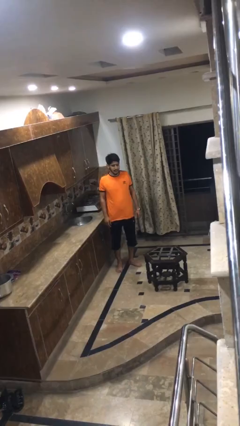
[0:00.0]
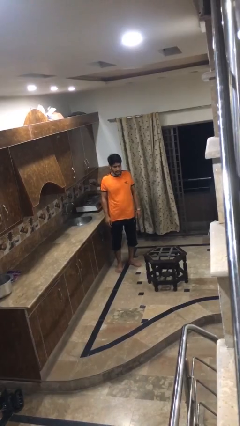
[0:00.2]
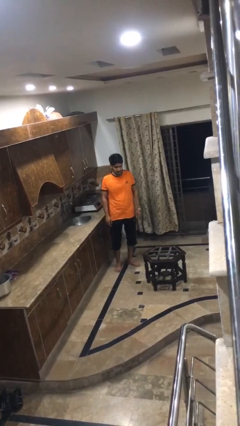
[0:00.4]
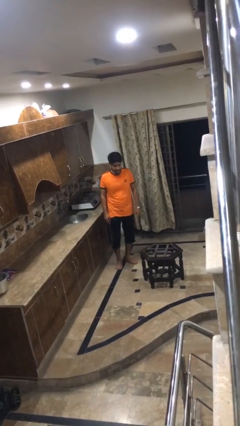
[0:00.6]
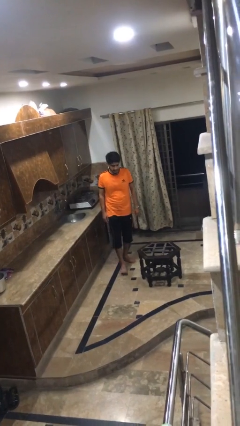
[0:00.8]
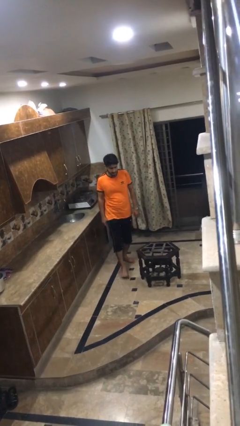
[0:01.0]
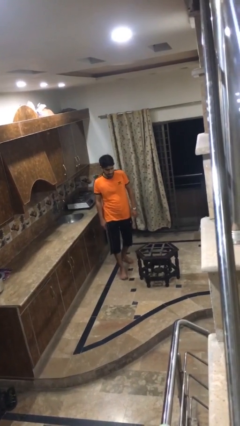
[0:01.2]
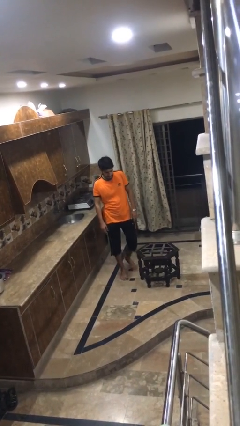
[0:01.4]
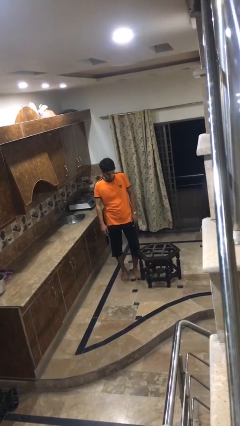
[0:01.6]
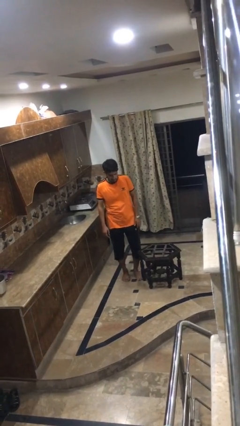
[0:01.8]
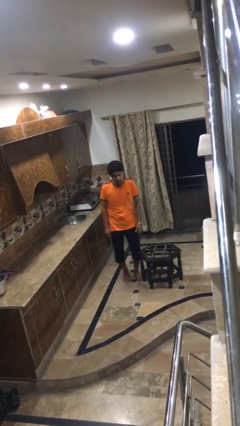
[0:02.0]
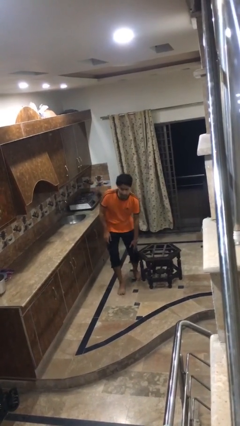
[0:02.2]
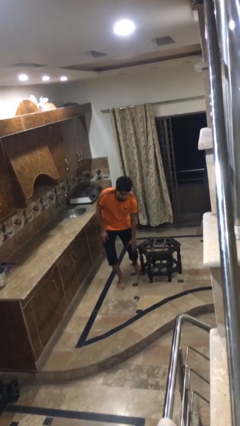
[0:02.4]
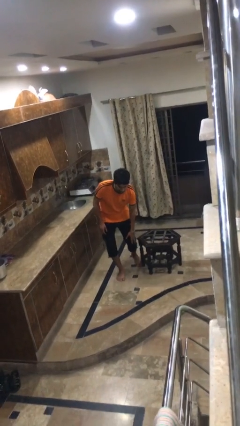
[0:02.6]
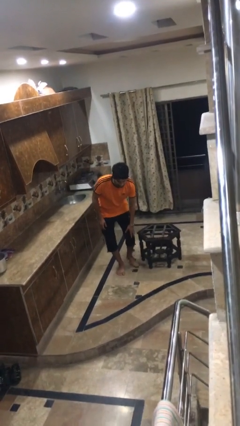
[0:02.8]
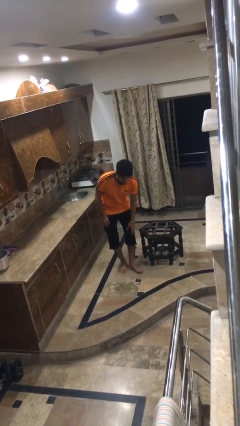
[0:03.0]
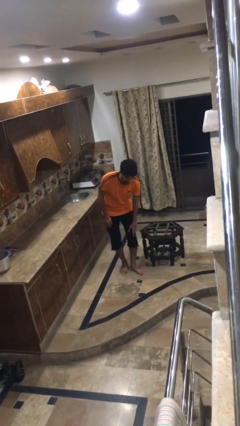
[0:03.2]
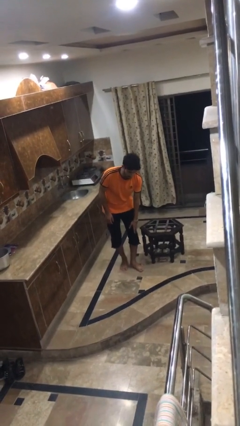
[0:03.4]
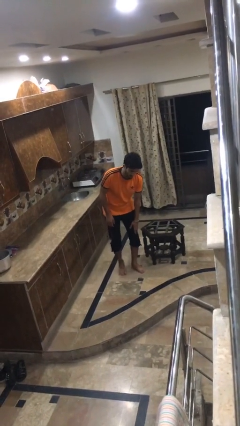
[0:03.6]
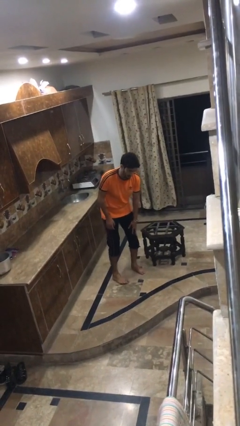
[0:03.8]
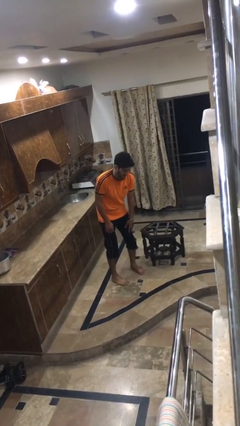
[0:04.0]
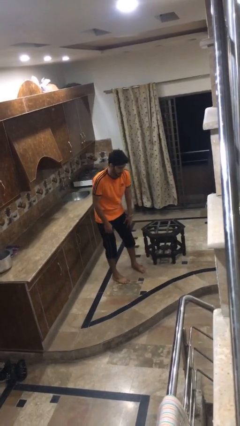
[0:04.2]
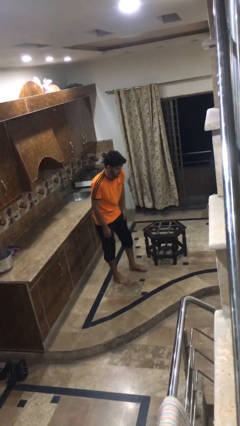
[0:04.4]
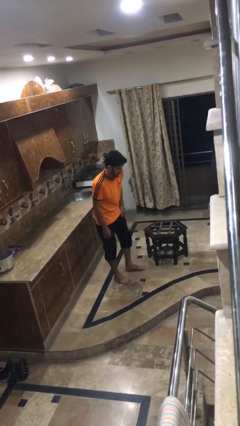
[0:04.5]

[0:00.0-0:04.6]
person bumps into table

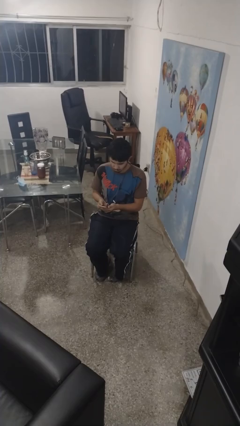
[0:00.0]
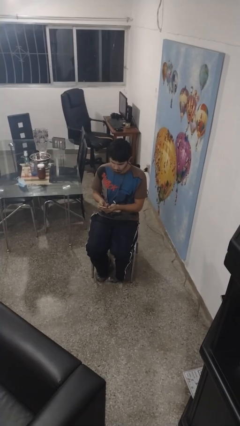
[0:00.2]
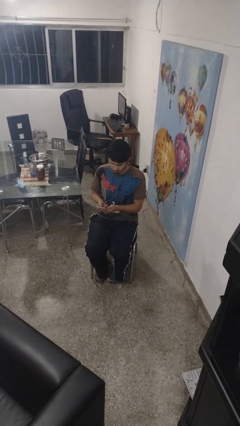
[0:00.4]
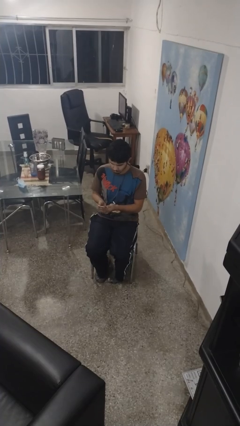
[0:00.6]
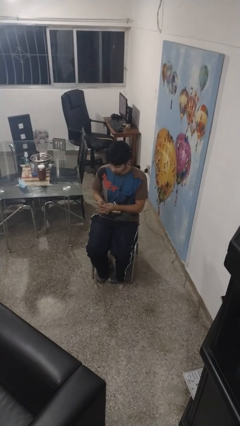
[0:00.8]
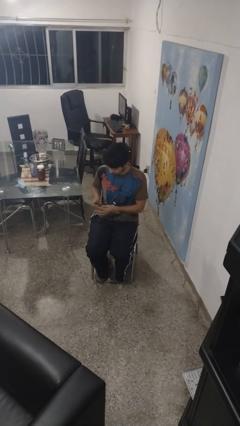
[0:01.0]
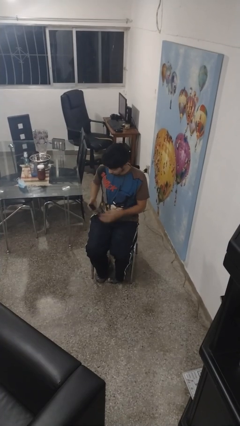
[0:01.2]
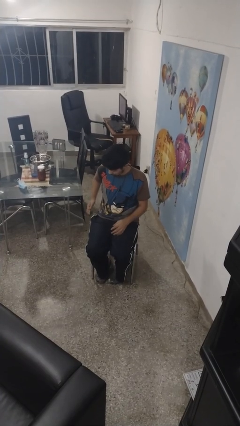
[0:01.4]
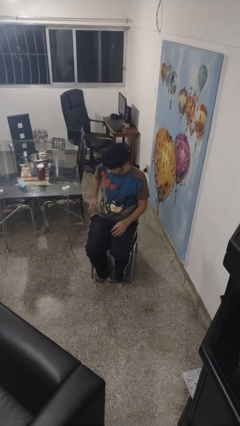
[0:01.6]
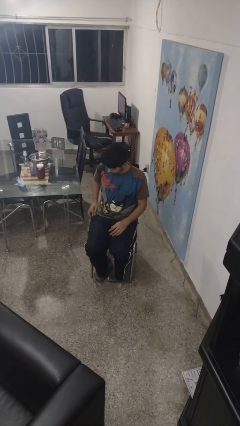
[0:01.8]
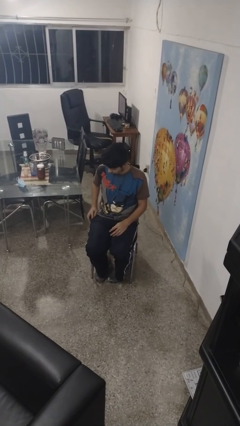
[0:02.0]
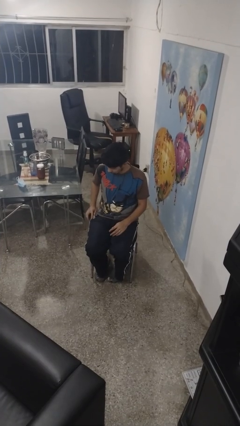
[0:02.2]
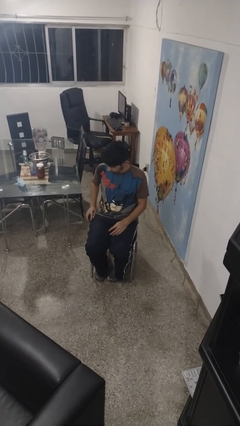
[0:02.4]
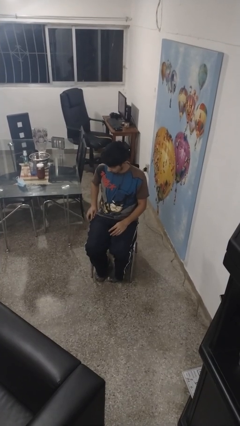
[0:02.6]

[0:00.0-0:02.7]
person puts phone into pocket

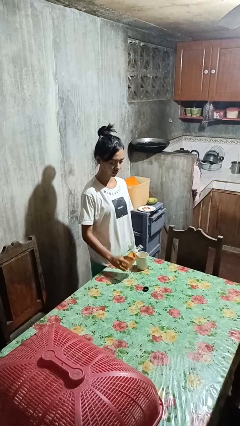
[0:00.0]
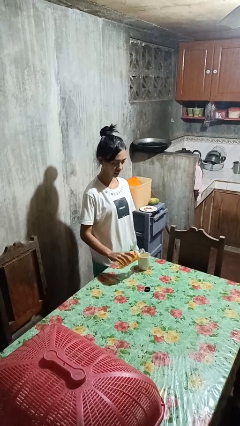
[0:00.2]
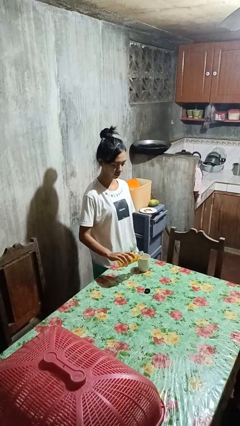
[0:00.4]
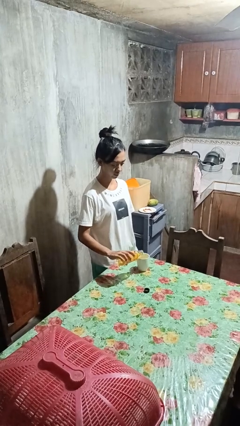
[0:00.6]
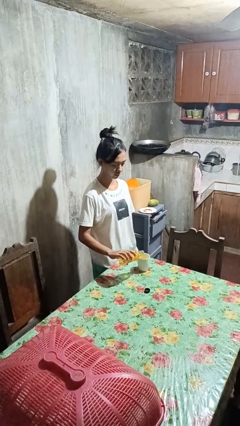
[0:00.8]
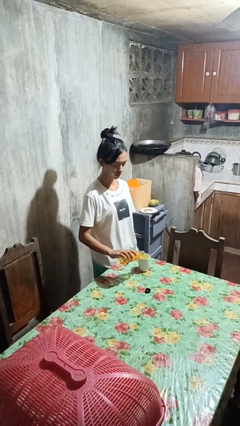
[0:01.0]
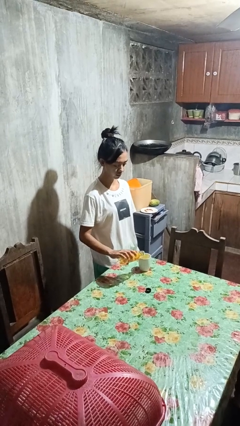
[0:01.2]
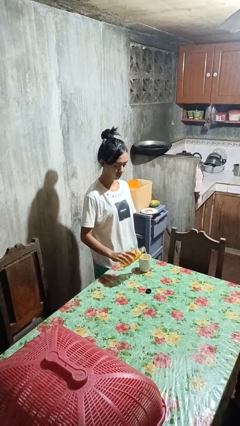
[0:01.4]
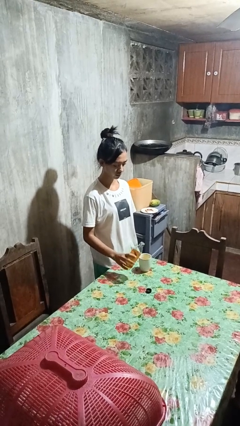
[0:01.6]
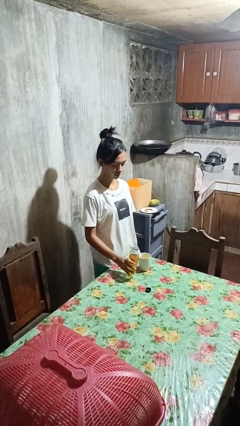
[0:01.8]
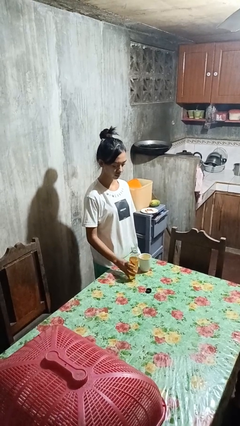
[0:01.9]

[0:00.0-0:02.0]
person pours liquid into cup

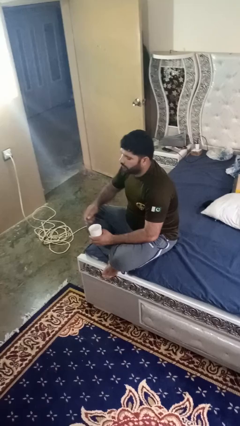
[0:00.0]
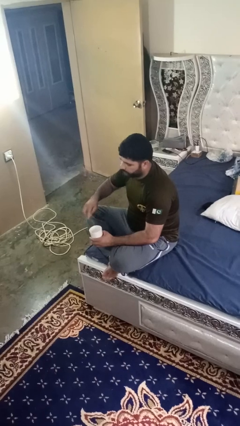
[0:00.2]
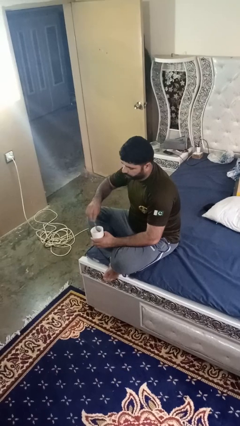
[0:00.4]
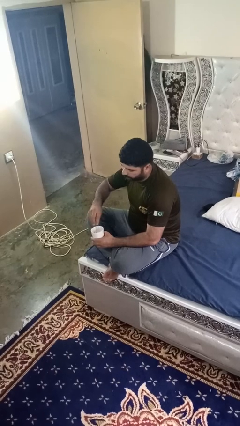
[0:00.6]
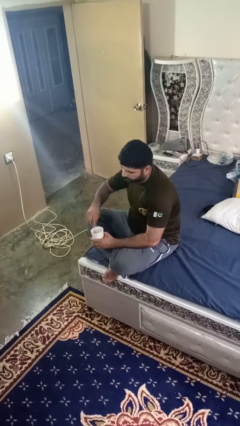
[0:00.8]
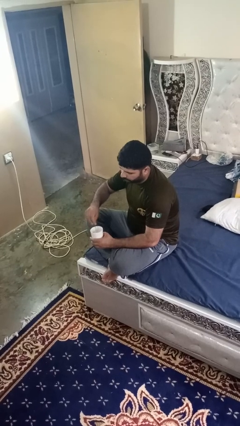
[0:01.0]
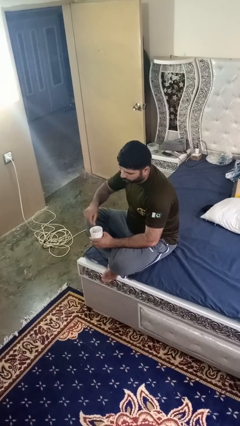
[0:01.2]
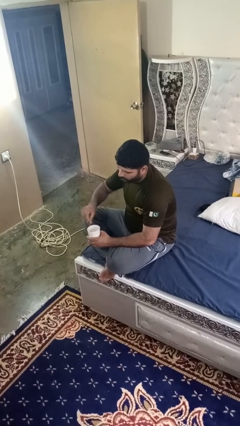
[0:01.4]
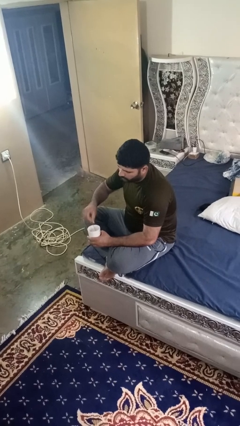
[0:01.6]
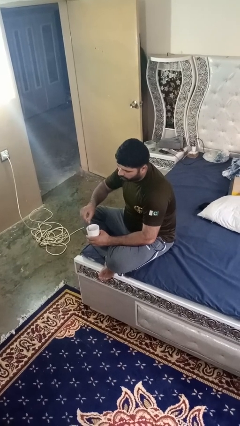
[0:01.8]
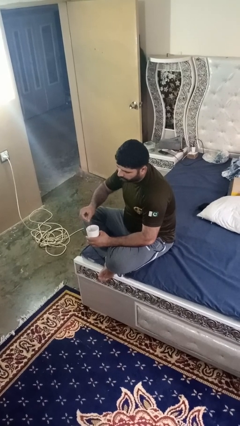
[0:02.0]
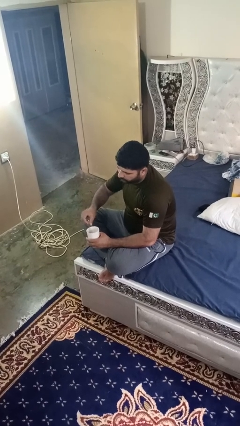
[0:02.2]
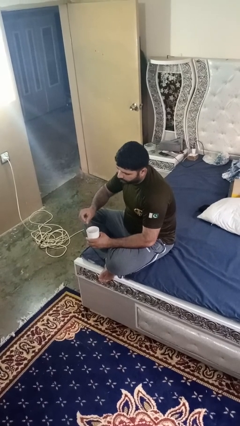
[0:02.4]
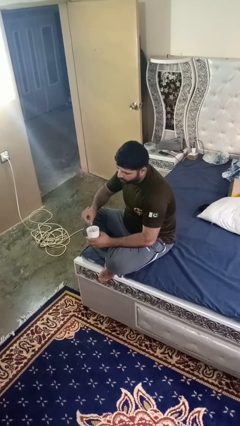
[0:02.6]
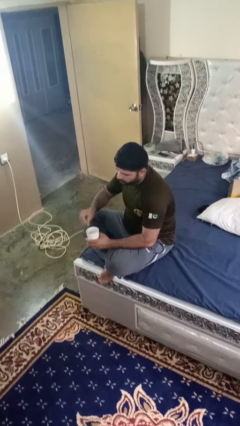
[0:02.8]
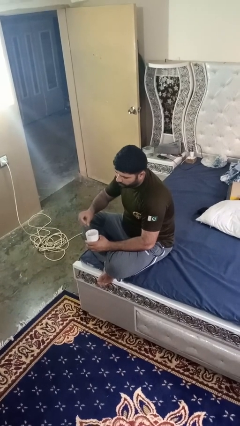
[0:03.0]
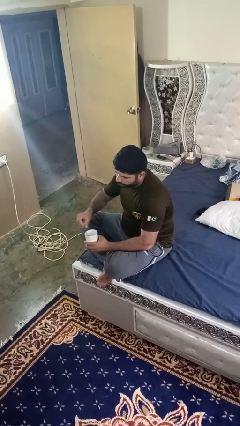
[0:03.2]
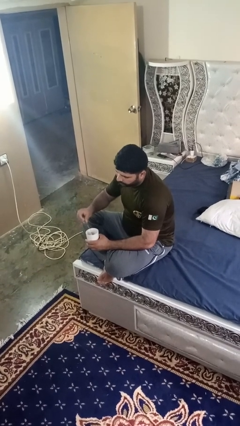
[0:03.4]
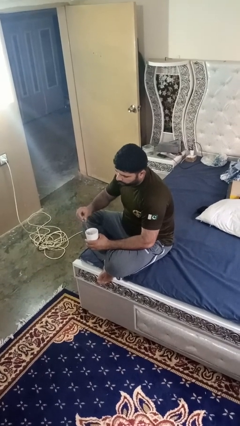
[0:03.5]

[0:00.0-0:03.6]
person stirs mug

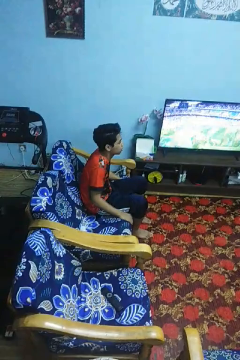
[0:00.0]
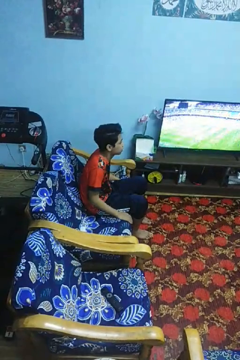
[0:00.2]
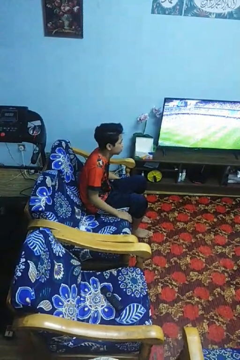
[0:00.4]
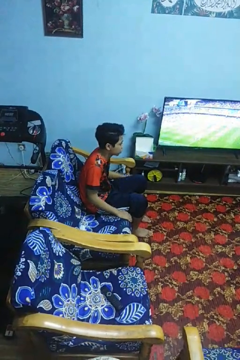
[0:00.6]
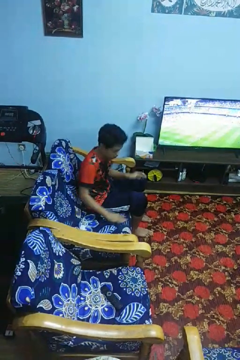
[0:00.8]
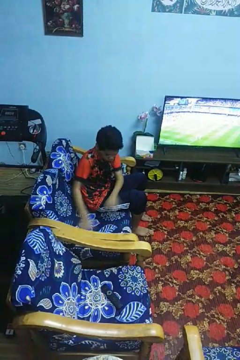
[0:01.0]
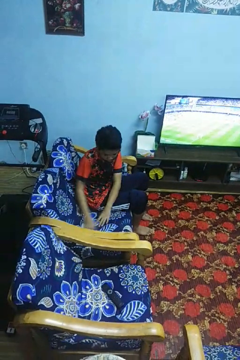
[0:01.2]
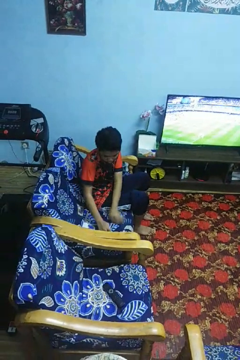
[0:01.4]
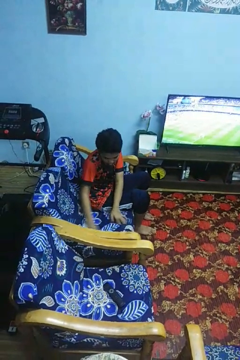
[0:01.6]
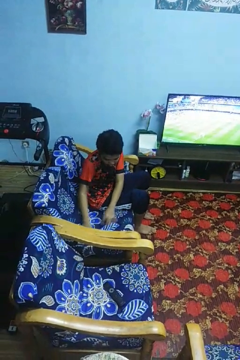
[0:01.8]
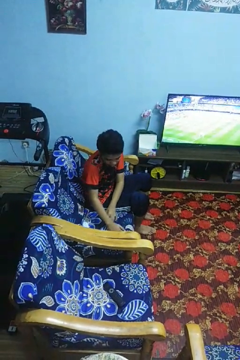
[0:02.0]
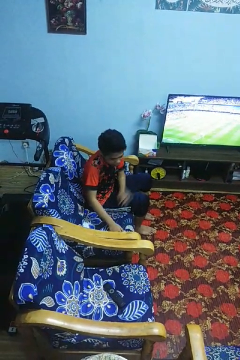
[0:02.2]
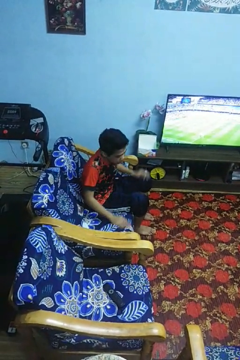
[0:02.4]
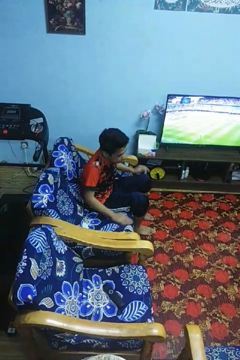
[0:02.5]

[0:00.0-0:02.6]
person searches in couch

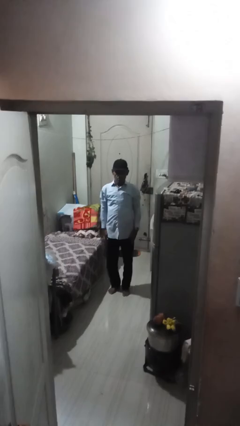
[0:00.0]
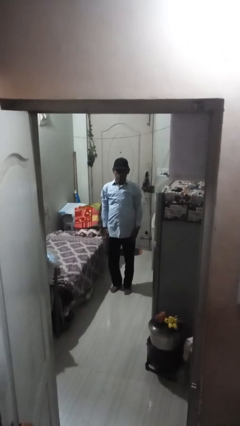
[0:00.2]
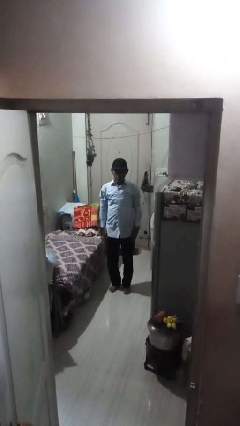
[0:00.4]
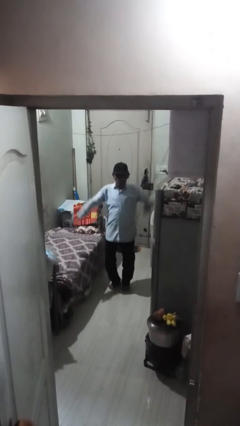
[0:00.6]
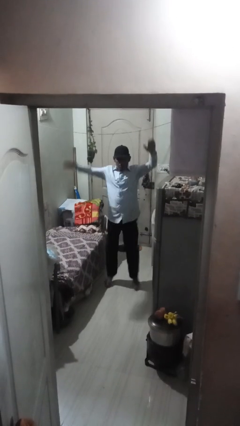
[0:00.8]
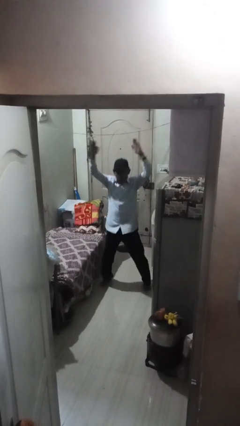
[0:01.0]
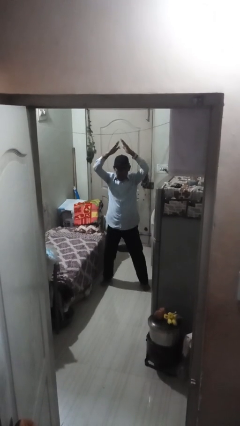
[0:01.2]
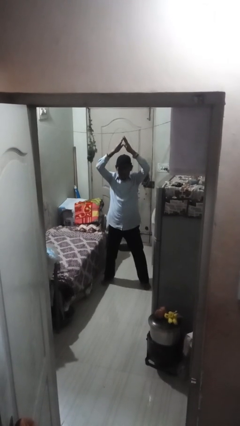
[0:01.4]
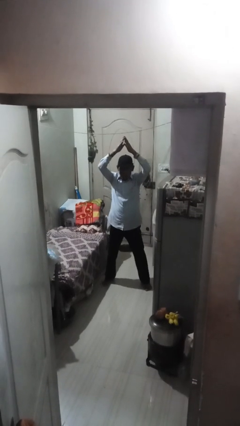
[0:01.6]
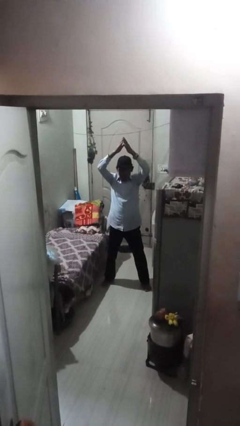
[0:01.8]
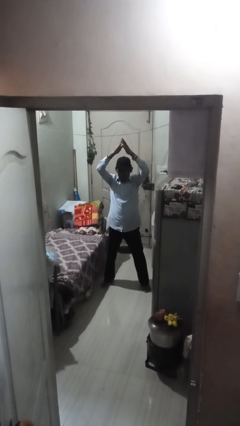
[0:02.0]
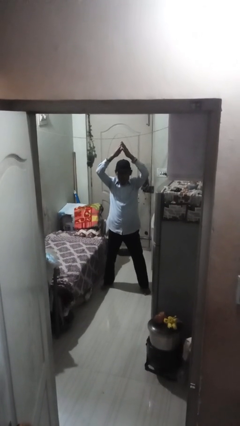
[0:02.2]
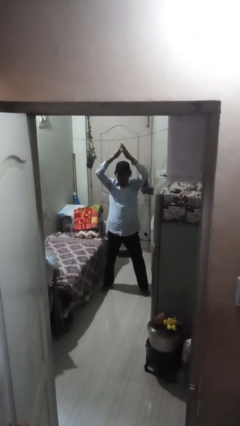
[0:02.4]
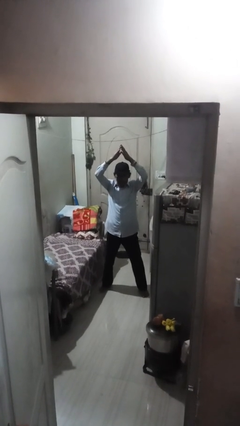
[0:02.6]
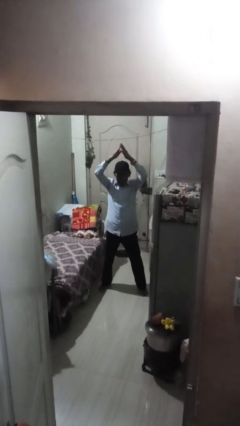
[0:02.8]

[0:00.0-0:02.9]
person exercises with jumping jacks
